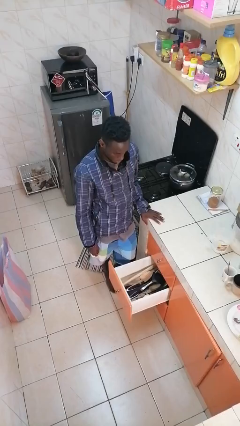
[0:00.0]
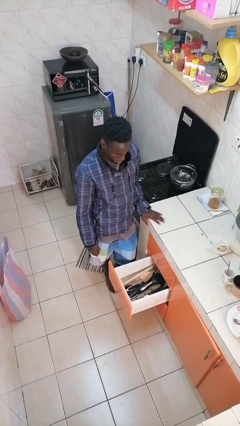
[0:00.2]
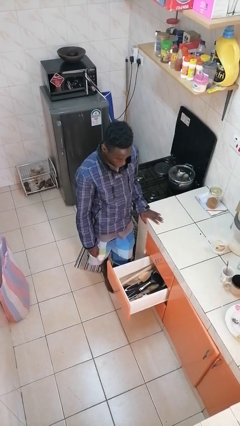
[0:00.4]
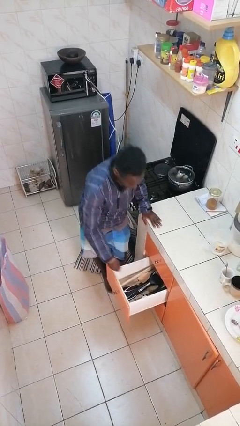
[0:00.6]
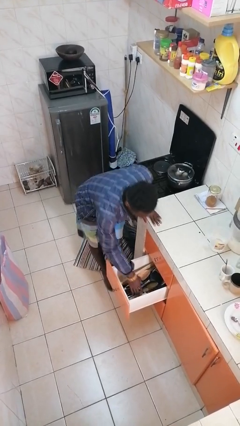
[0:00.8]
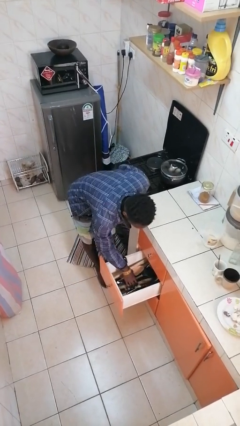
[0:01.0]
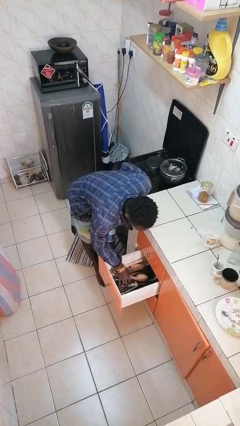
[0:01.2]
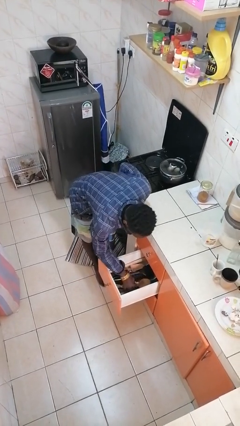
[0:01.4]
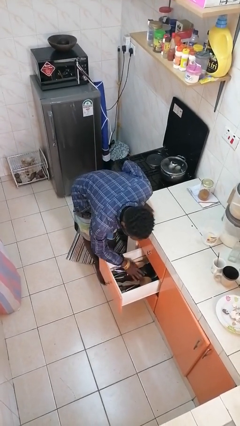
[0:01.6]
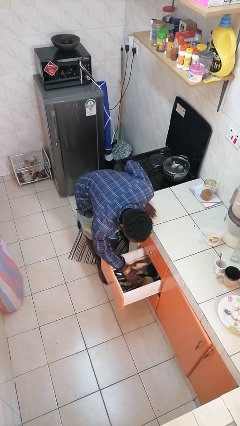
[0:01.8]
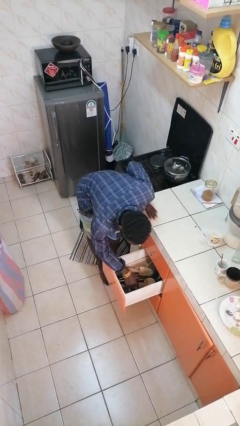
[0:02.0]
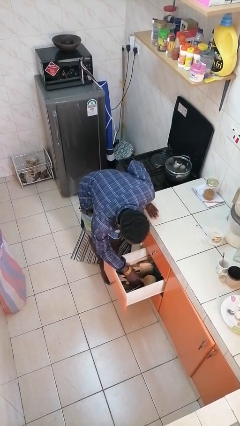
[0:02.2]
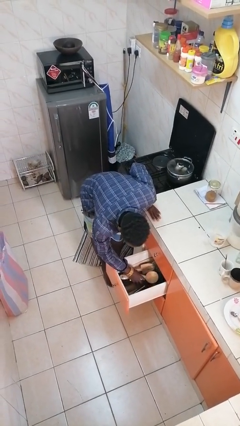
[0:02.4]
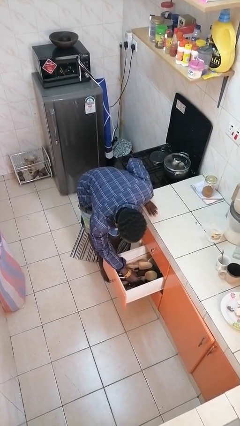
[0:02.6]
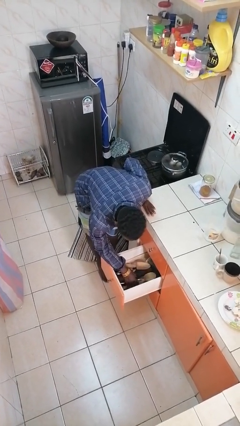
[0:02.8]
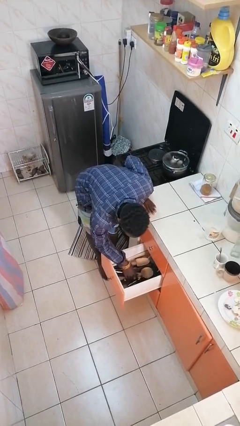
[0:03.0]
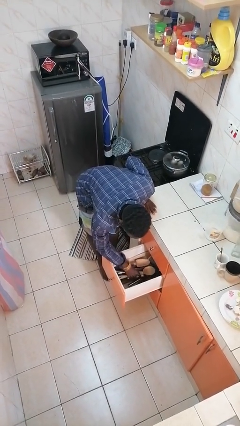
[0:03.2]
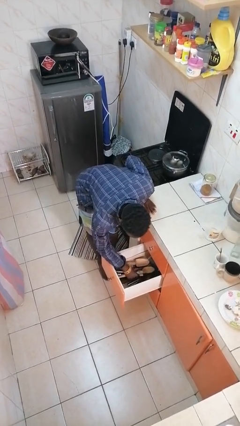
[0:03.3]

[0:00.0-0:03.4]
person searches in kitchen drawer

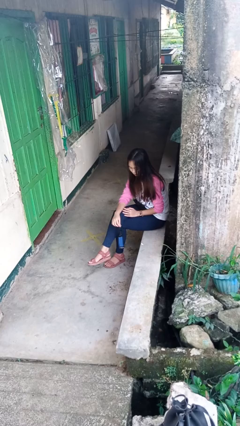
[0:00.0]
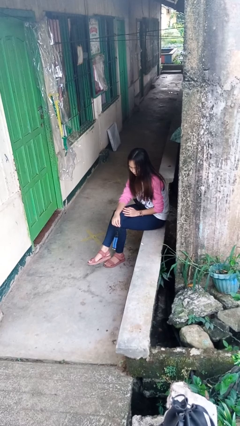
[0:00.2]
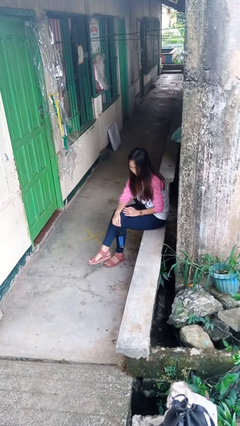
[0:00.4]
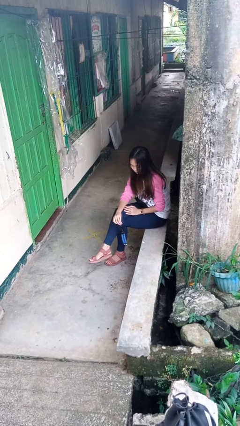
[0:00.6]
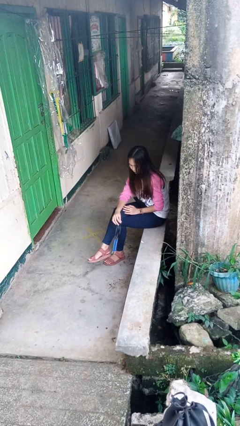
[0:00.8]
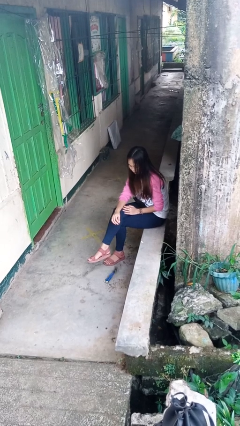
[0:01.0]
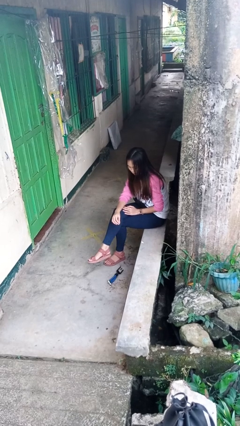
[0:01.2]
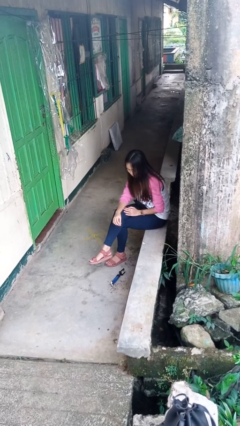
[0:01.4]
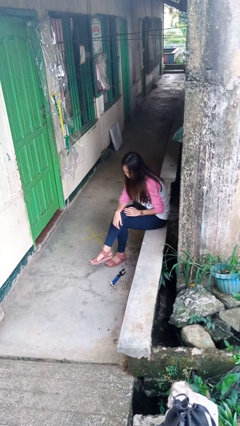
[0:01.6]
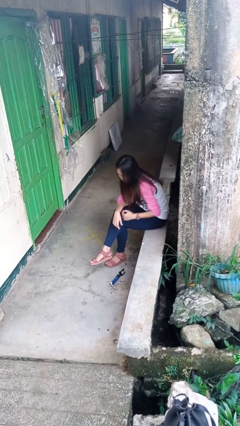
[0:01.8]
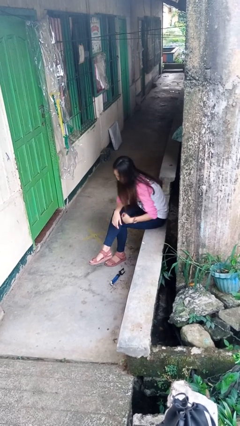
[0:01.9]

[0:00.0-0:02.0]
person drops object

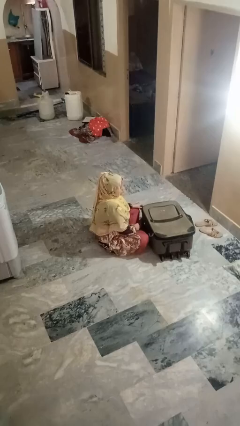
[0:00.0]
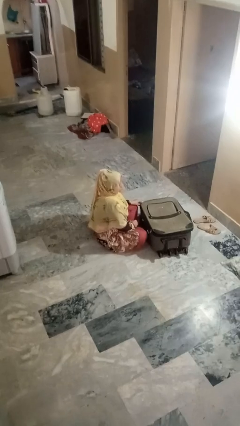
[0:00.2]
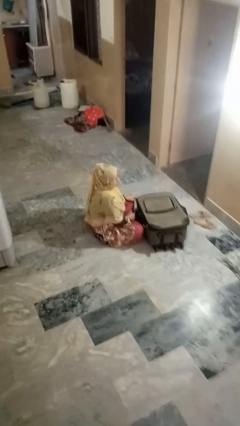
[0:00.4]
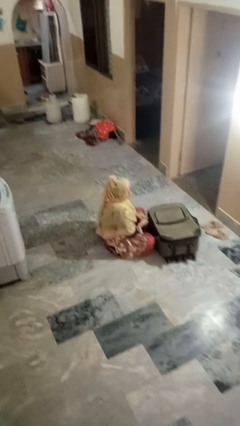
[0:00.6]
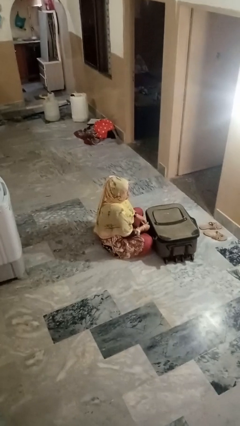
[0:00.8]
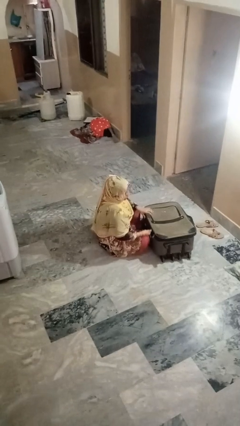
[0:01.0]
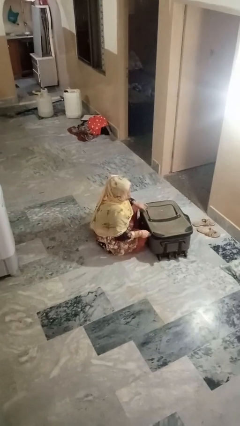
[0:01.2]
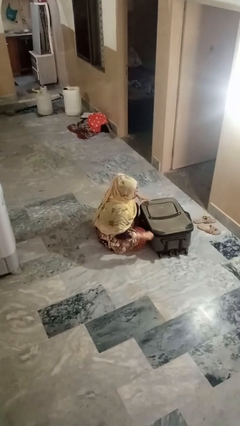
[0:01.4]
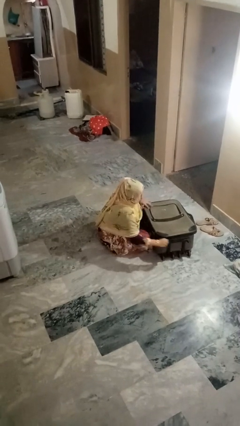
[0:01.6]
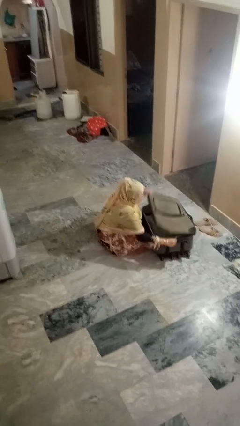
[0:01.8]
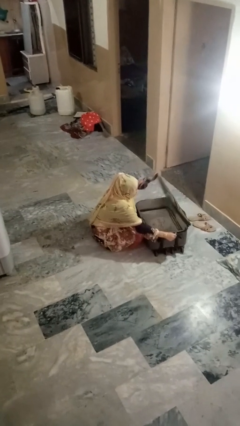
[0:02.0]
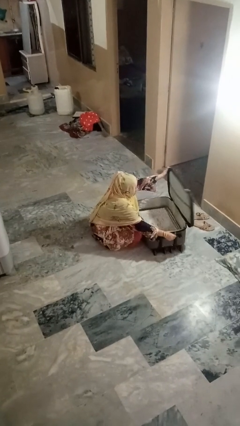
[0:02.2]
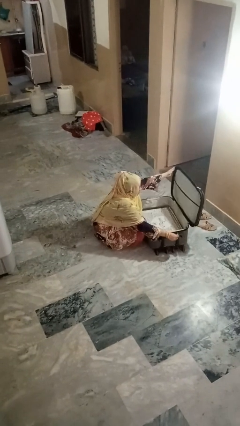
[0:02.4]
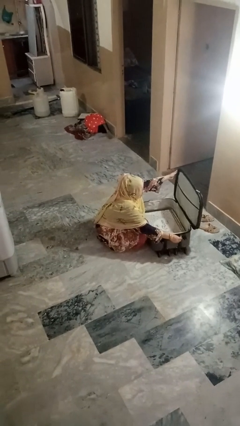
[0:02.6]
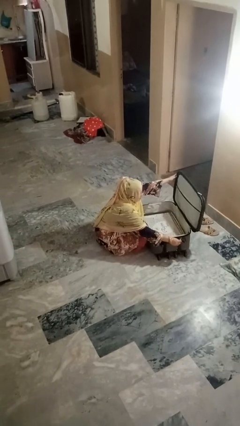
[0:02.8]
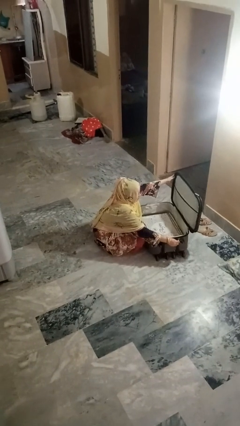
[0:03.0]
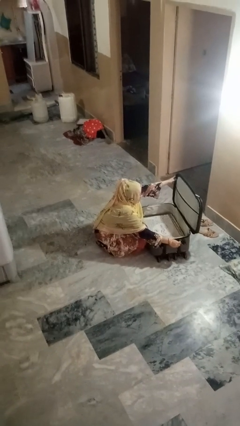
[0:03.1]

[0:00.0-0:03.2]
person opens suitcase

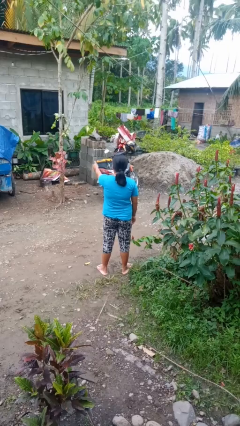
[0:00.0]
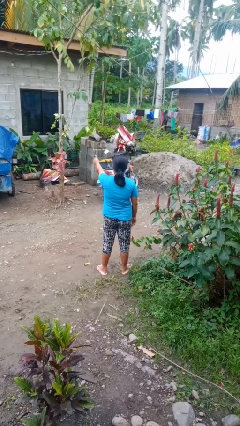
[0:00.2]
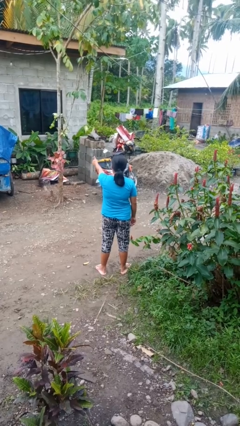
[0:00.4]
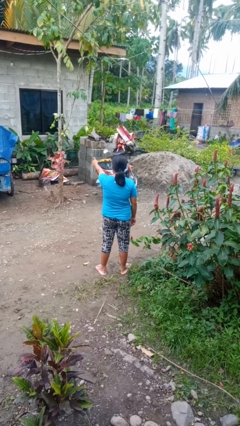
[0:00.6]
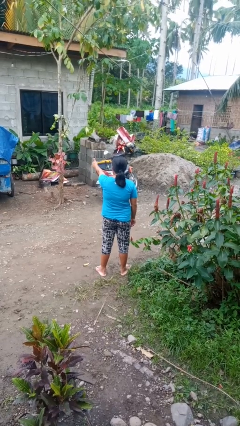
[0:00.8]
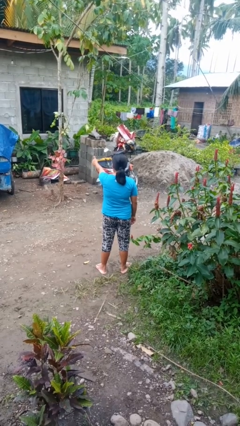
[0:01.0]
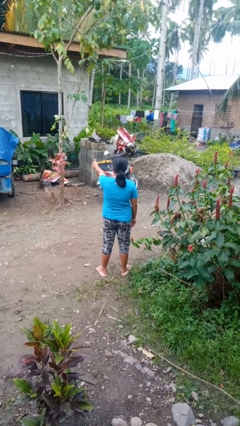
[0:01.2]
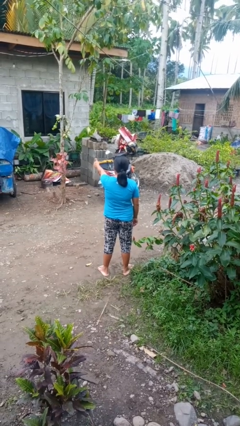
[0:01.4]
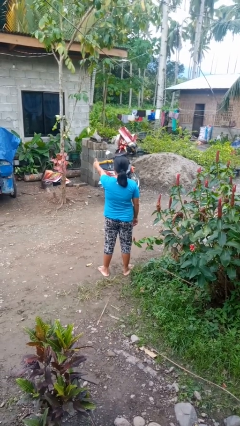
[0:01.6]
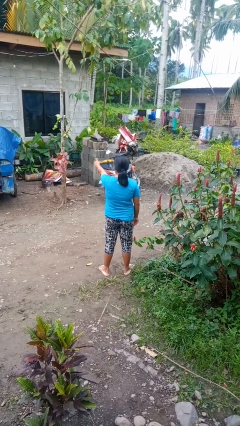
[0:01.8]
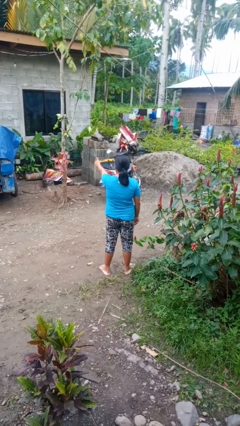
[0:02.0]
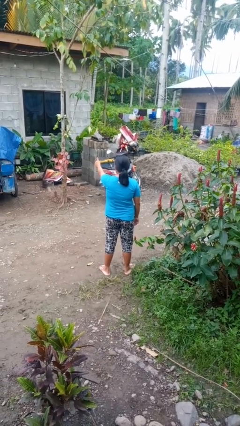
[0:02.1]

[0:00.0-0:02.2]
person gestures thumbs up

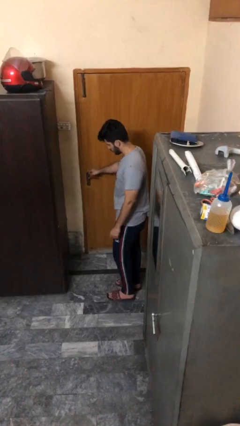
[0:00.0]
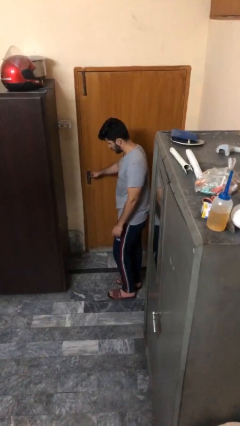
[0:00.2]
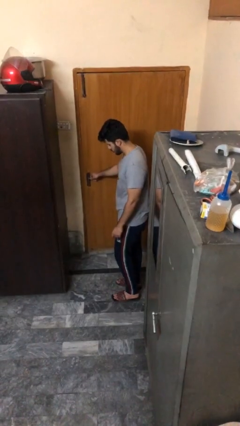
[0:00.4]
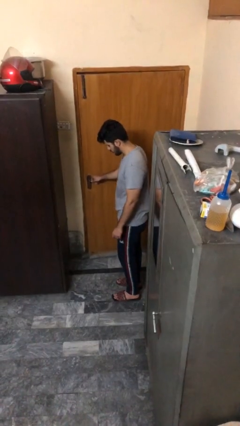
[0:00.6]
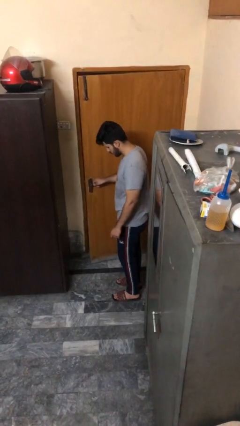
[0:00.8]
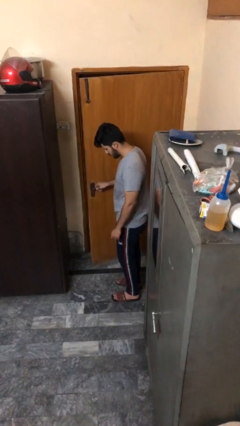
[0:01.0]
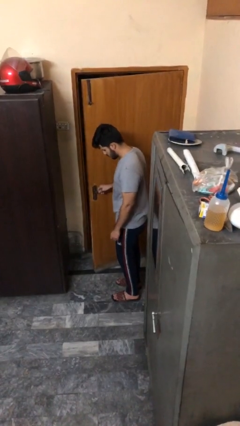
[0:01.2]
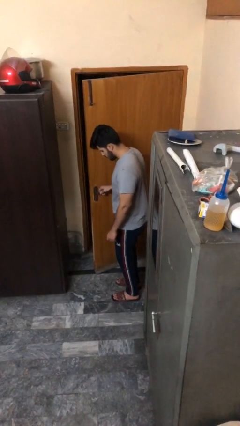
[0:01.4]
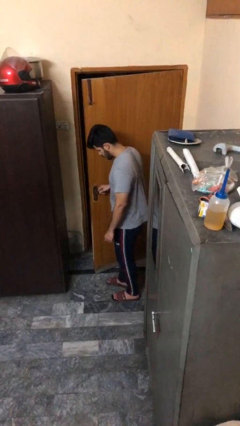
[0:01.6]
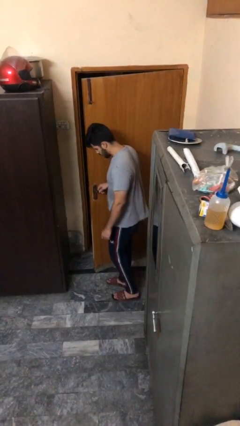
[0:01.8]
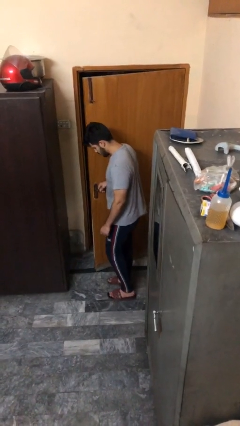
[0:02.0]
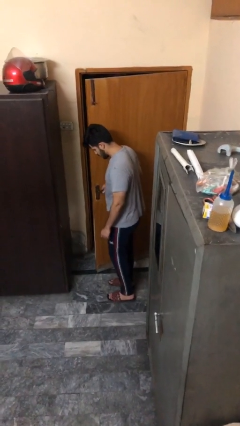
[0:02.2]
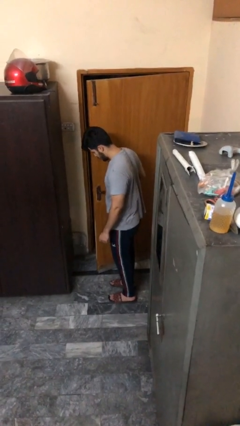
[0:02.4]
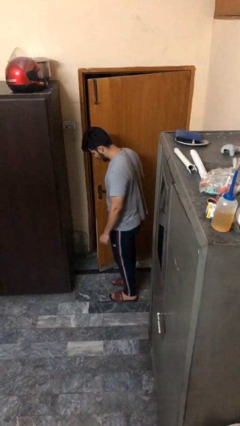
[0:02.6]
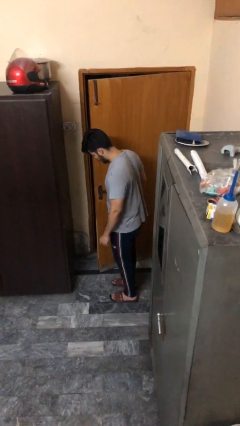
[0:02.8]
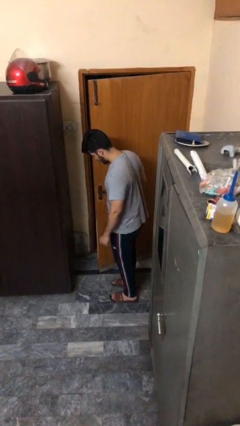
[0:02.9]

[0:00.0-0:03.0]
person opens facility door

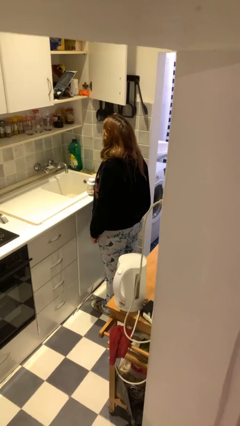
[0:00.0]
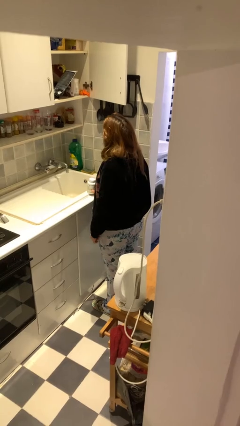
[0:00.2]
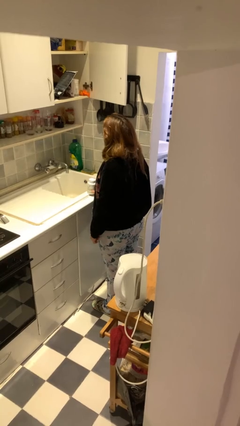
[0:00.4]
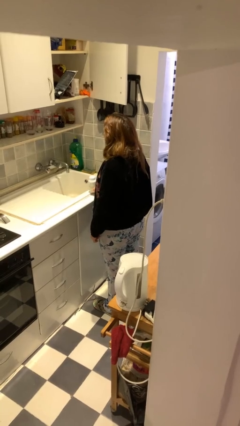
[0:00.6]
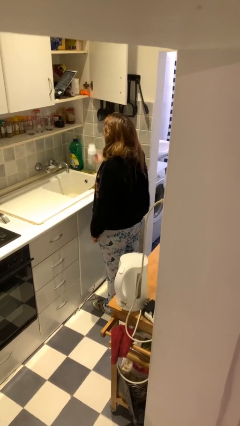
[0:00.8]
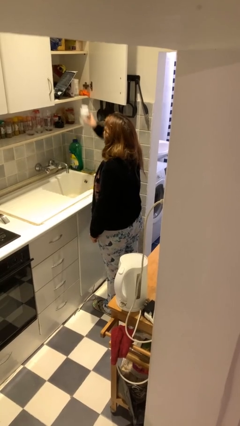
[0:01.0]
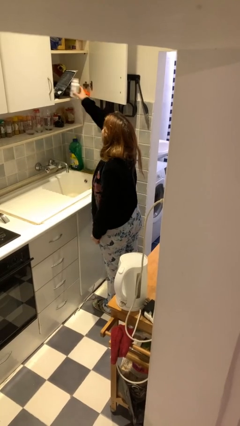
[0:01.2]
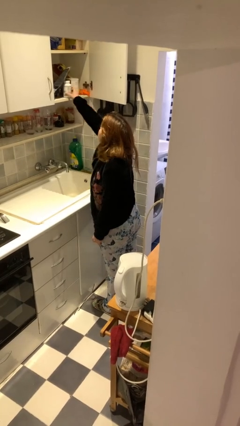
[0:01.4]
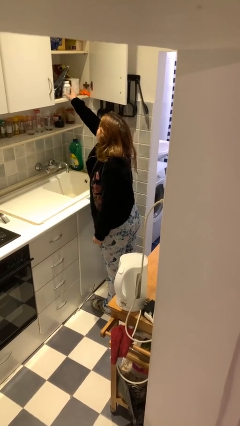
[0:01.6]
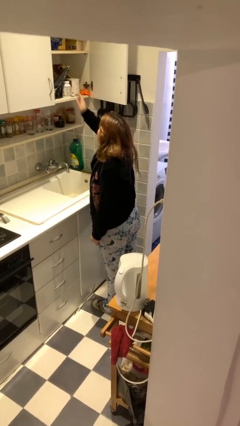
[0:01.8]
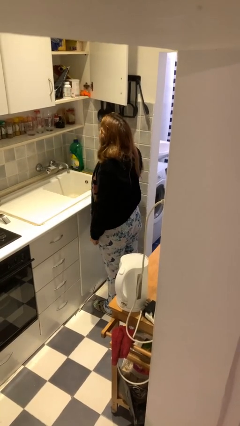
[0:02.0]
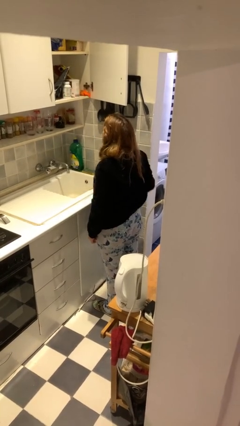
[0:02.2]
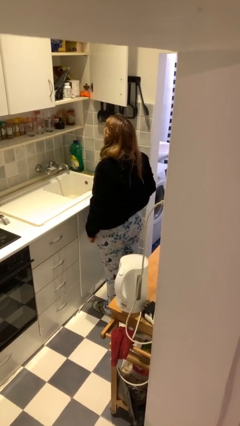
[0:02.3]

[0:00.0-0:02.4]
person puts object in cabinet

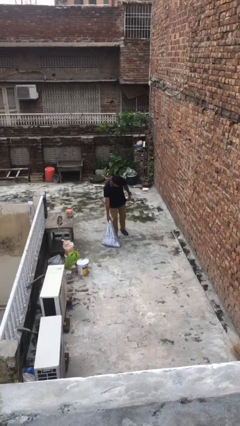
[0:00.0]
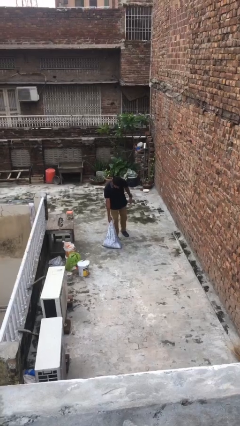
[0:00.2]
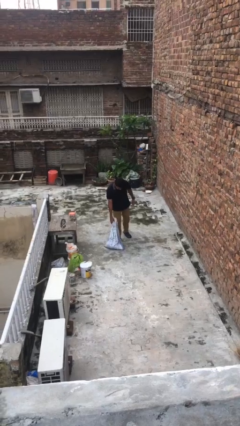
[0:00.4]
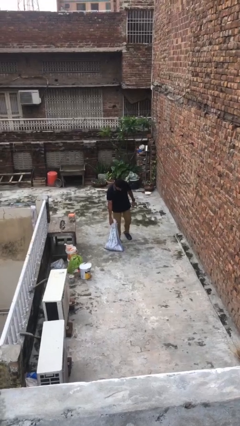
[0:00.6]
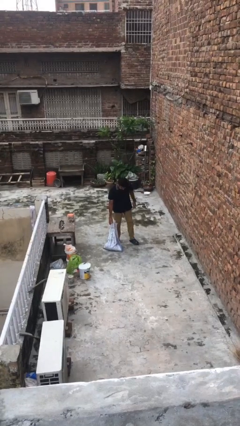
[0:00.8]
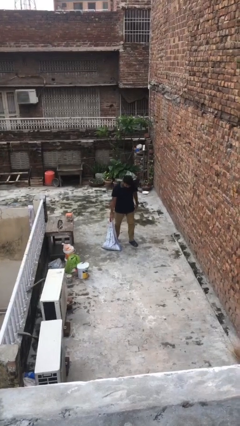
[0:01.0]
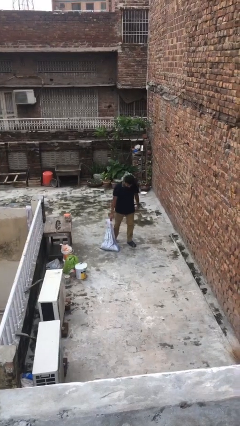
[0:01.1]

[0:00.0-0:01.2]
person puts down object on floor
